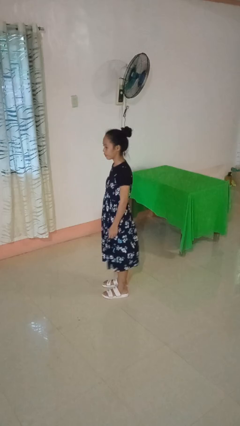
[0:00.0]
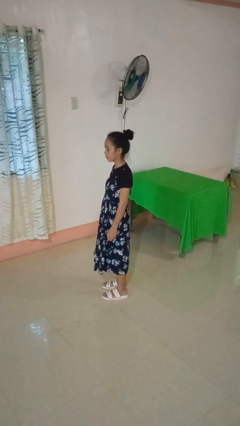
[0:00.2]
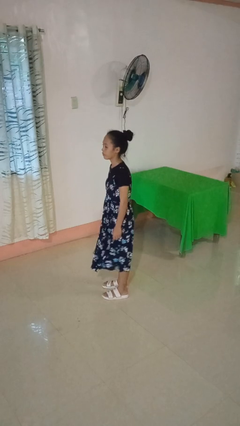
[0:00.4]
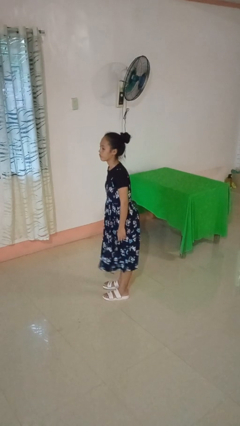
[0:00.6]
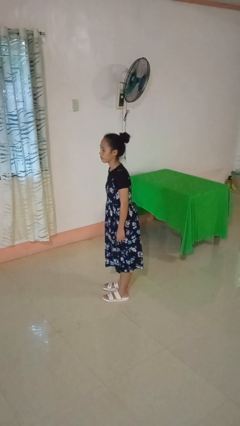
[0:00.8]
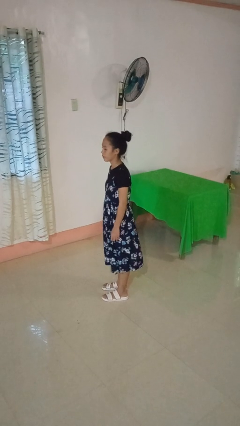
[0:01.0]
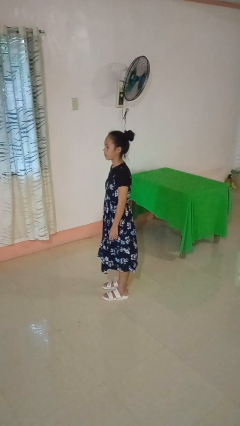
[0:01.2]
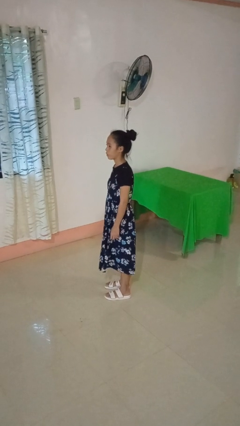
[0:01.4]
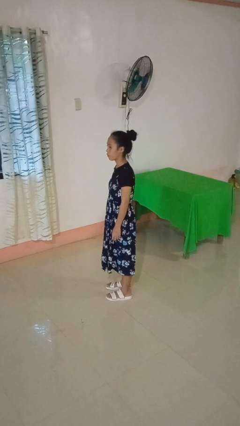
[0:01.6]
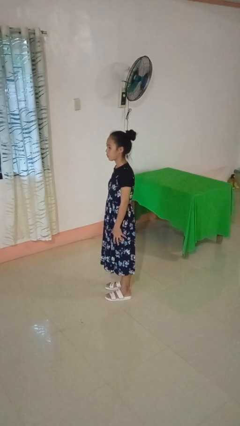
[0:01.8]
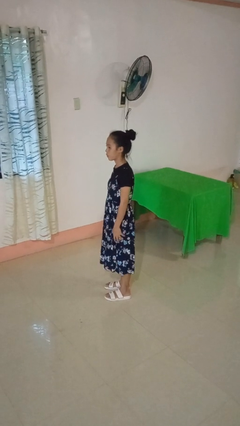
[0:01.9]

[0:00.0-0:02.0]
person wiggles hips

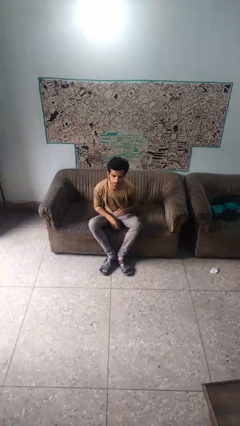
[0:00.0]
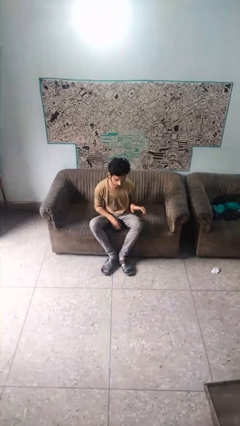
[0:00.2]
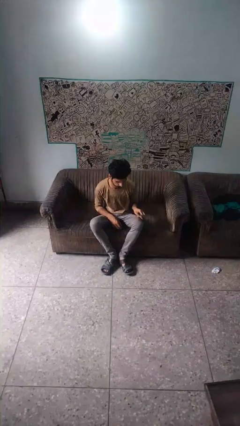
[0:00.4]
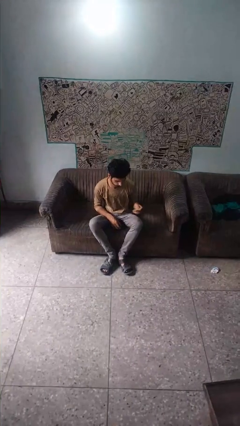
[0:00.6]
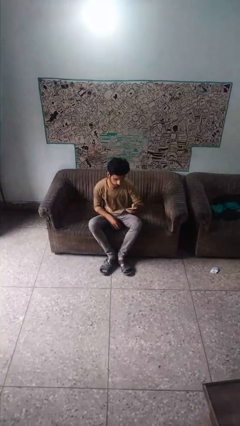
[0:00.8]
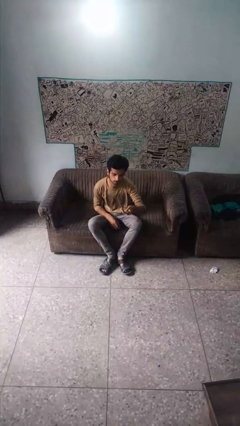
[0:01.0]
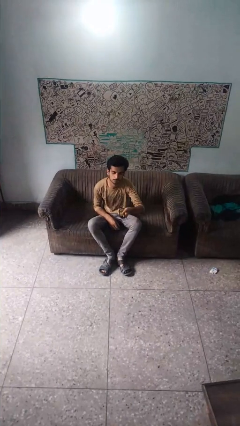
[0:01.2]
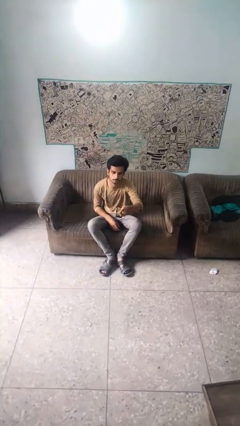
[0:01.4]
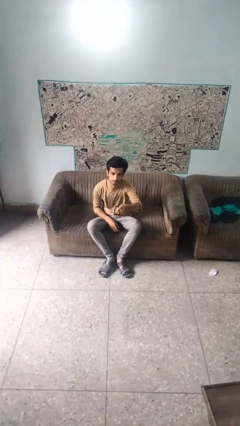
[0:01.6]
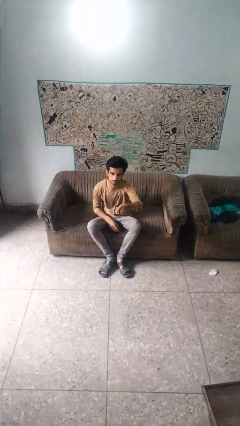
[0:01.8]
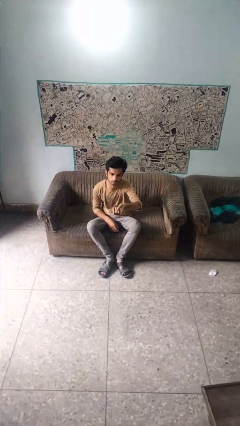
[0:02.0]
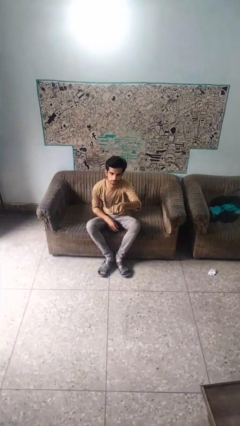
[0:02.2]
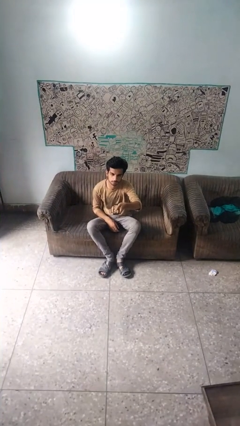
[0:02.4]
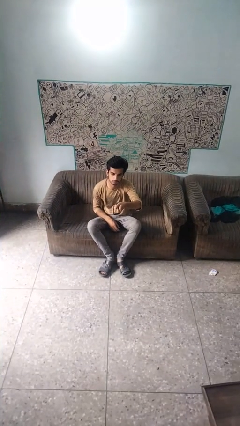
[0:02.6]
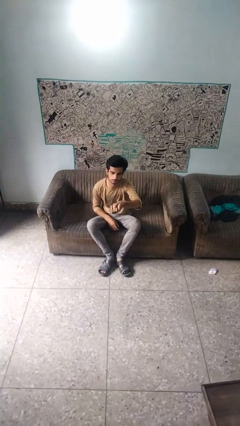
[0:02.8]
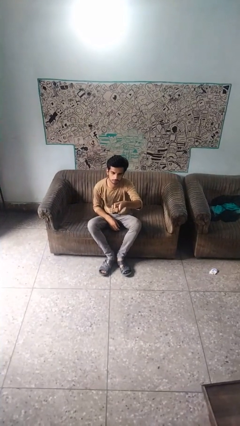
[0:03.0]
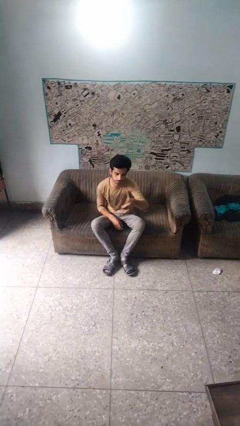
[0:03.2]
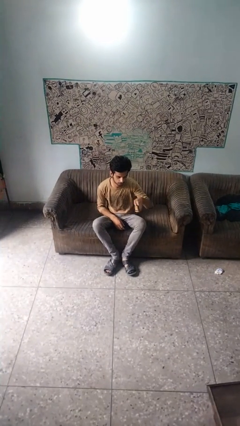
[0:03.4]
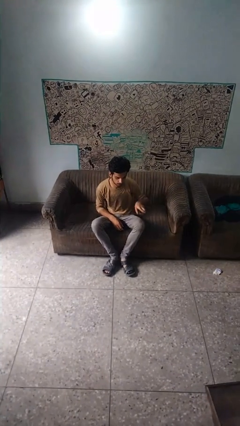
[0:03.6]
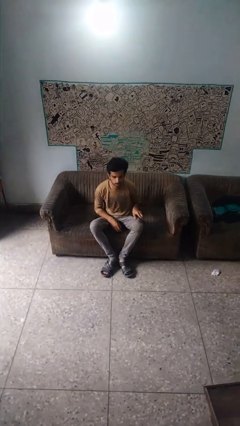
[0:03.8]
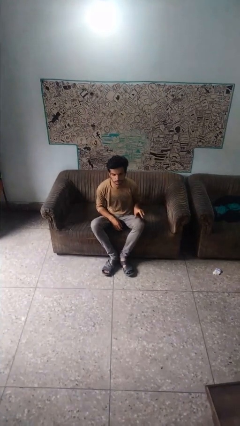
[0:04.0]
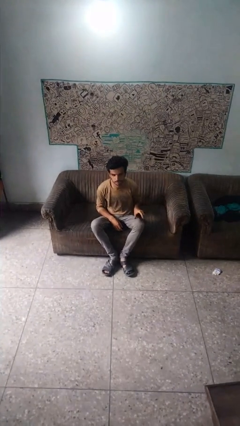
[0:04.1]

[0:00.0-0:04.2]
person uses television remote

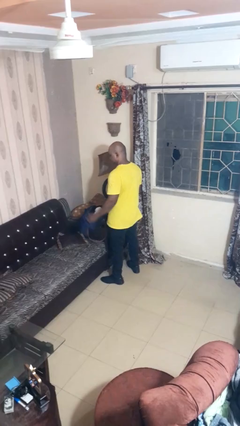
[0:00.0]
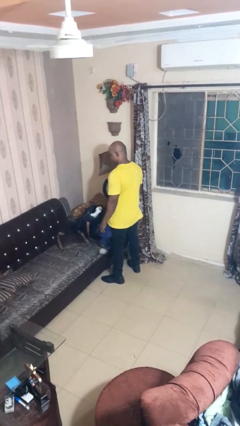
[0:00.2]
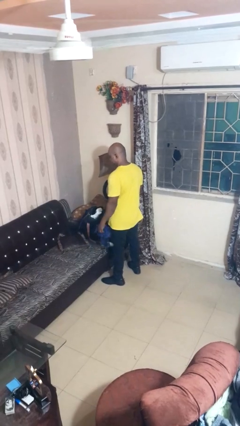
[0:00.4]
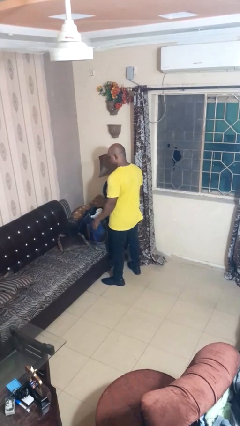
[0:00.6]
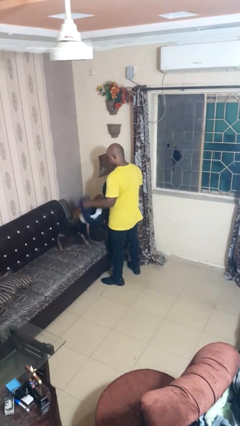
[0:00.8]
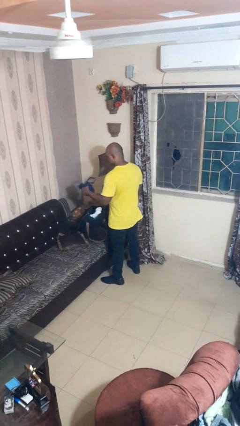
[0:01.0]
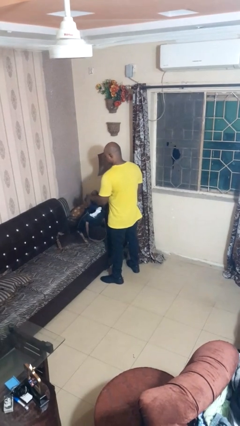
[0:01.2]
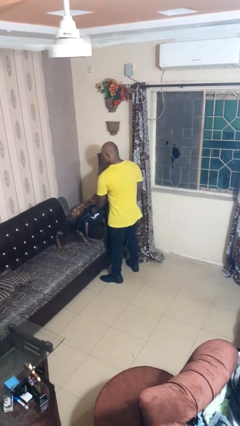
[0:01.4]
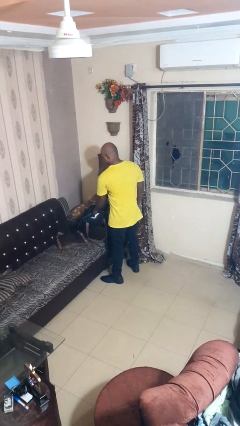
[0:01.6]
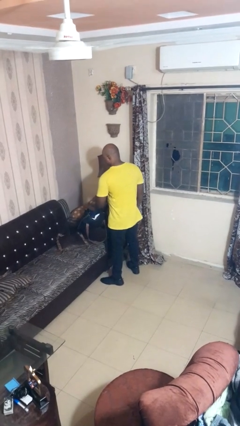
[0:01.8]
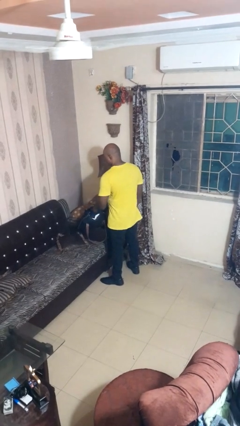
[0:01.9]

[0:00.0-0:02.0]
person puts object into bag

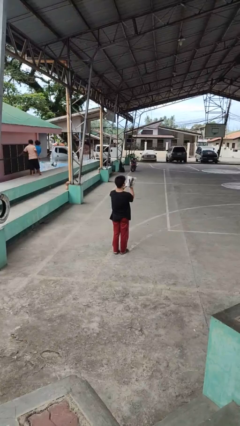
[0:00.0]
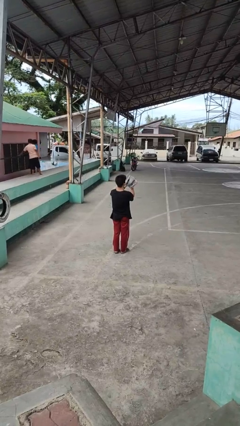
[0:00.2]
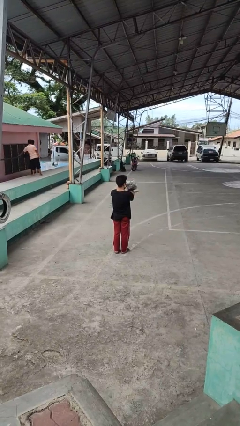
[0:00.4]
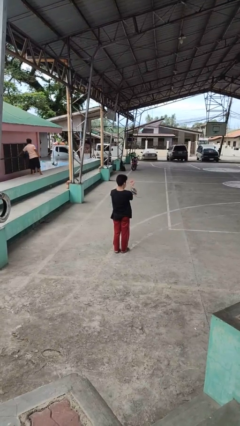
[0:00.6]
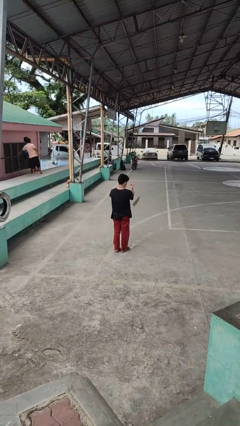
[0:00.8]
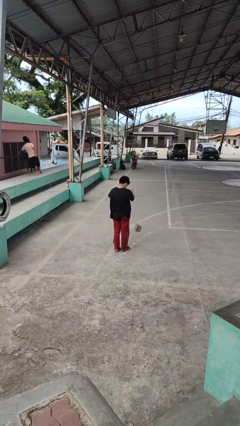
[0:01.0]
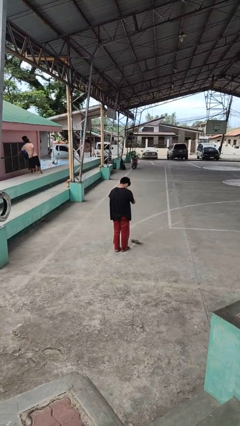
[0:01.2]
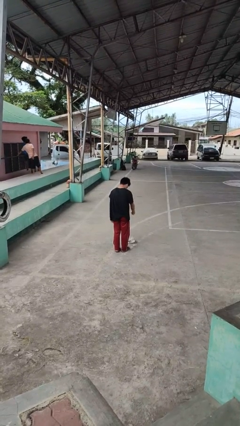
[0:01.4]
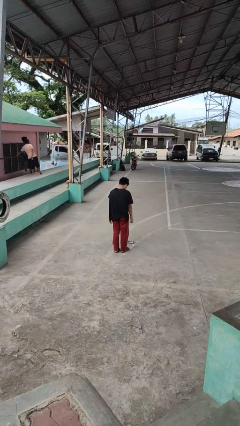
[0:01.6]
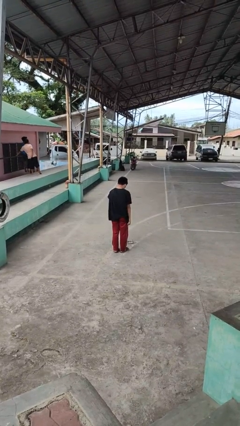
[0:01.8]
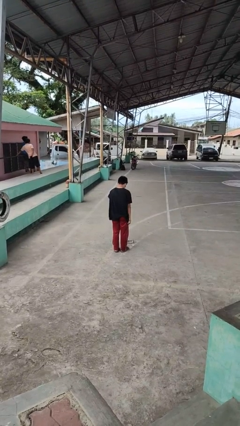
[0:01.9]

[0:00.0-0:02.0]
person drops object

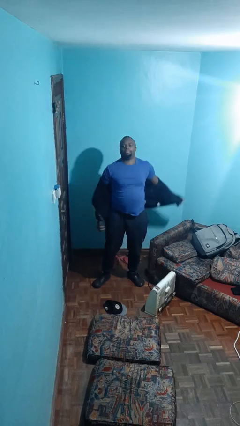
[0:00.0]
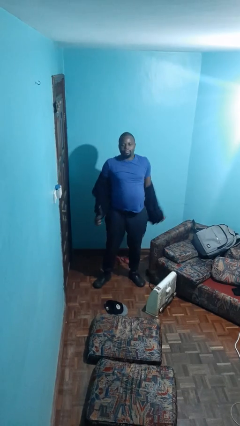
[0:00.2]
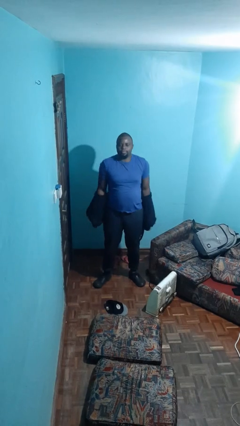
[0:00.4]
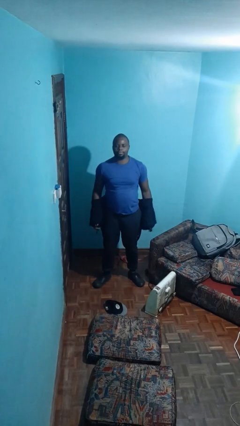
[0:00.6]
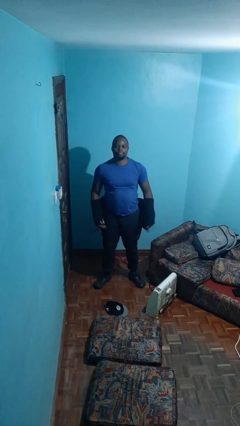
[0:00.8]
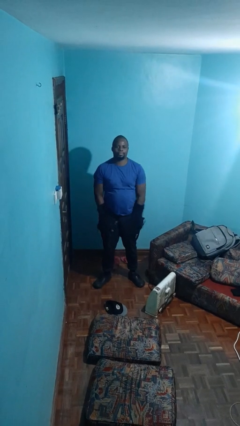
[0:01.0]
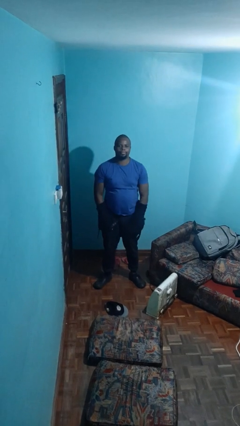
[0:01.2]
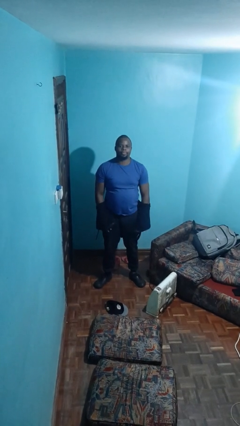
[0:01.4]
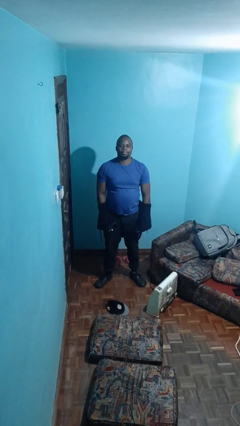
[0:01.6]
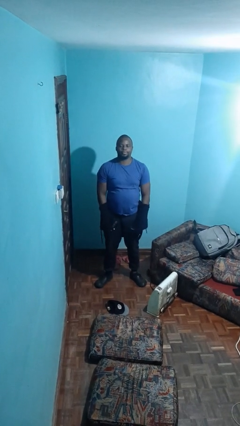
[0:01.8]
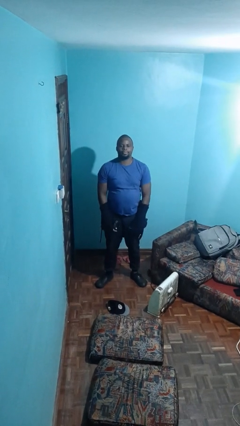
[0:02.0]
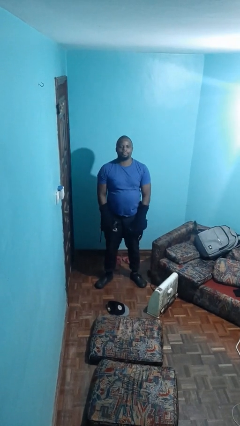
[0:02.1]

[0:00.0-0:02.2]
person takes off jacket

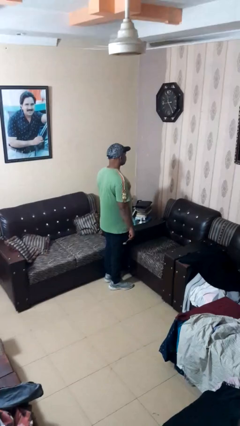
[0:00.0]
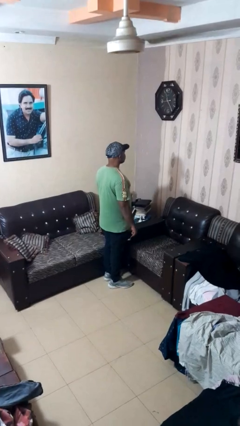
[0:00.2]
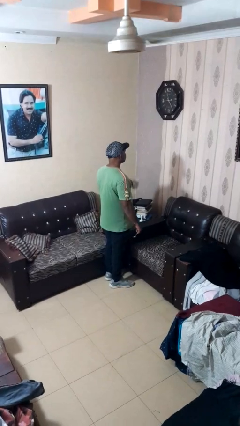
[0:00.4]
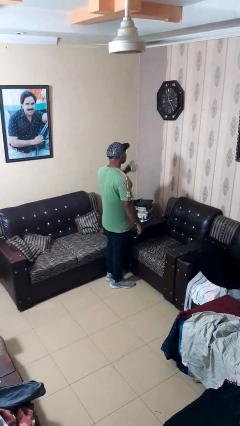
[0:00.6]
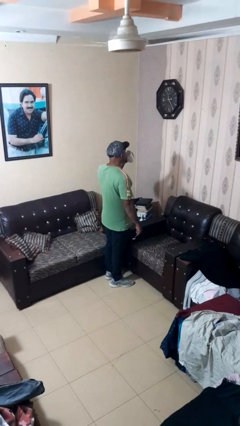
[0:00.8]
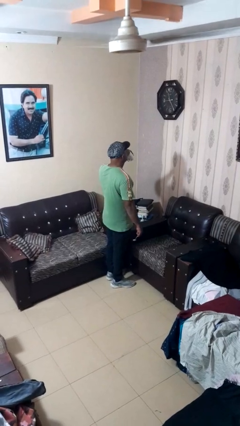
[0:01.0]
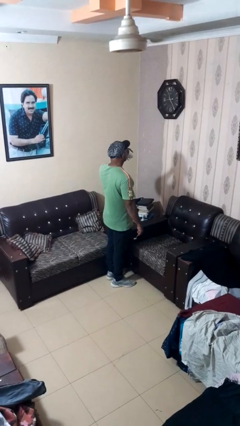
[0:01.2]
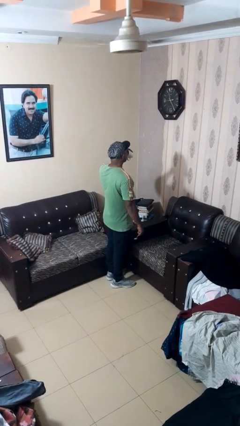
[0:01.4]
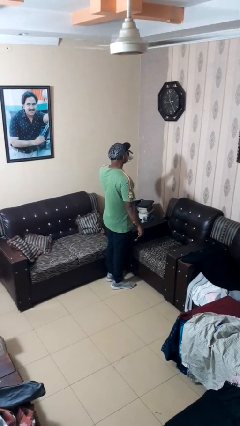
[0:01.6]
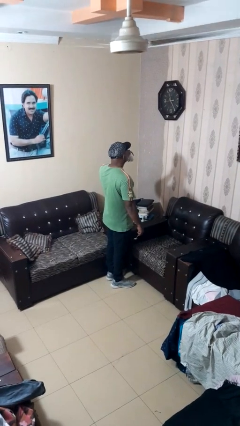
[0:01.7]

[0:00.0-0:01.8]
person drinks from mug

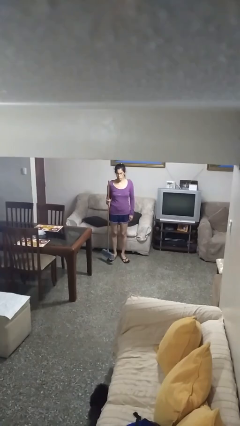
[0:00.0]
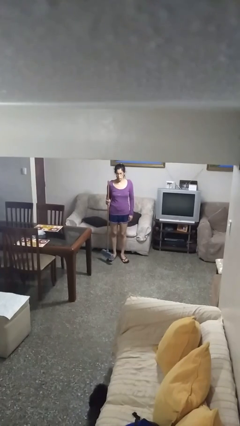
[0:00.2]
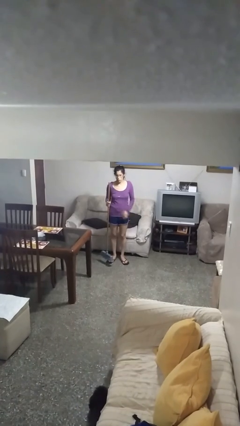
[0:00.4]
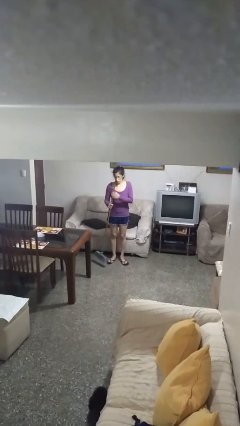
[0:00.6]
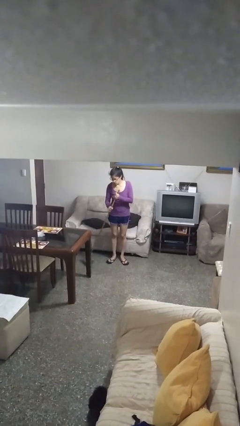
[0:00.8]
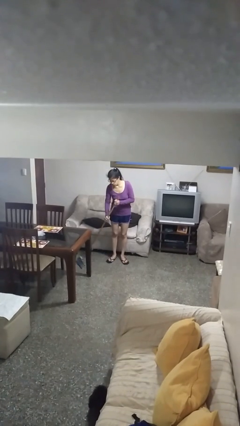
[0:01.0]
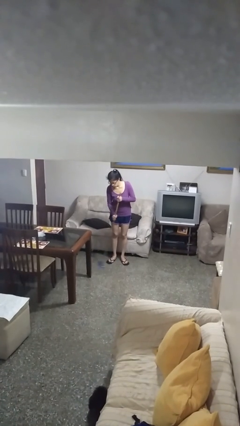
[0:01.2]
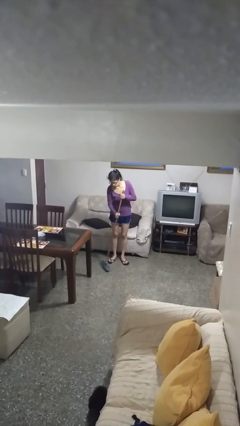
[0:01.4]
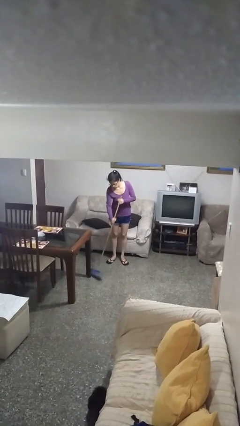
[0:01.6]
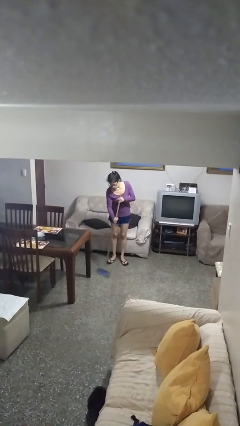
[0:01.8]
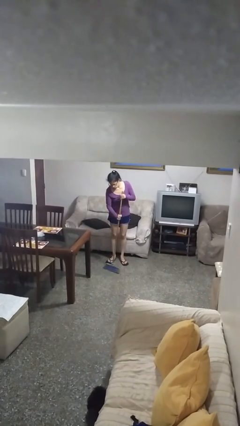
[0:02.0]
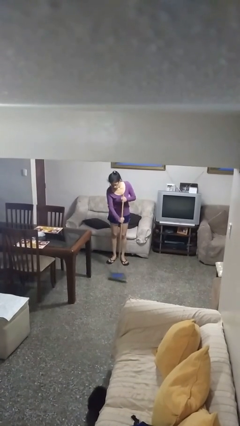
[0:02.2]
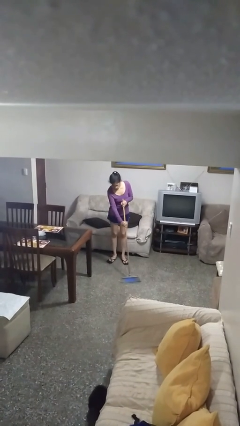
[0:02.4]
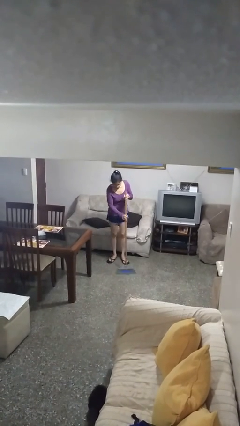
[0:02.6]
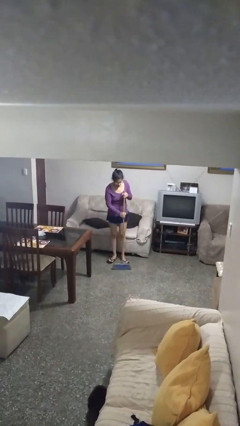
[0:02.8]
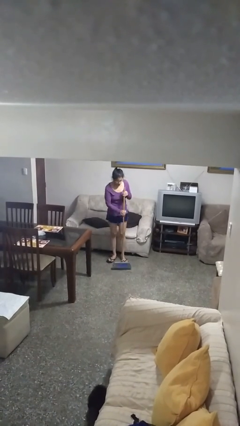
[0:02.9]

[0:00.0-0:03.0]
person sweeps floor
